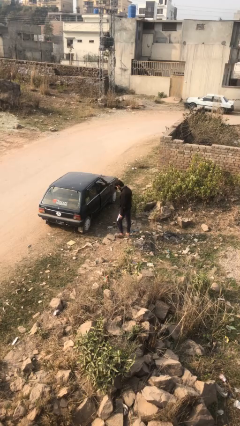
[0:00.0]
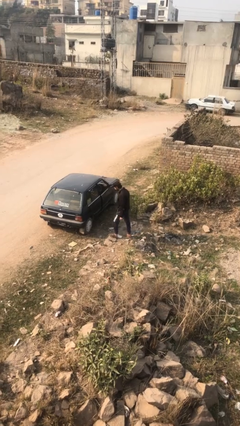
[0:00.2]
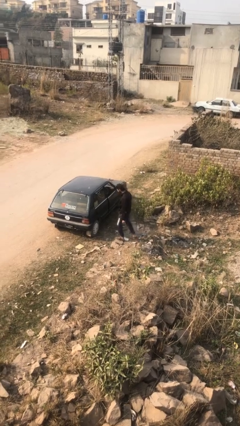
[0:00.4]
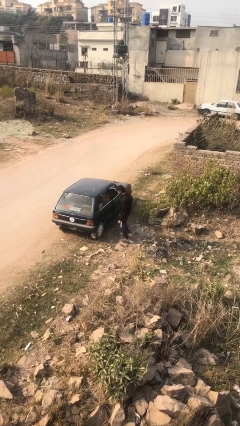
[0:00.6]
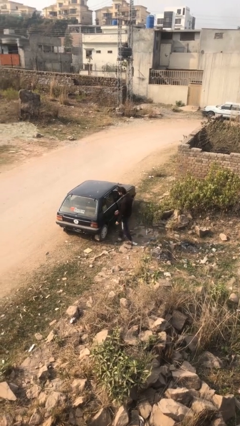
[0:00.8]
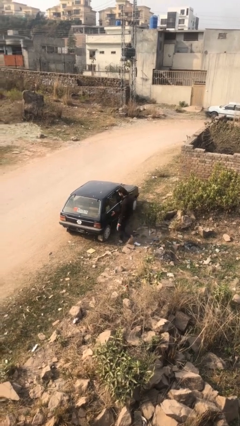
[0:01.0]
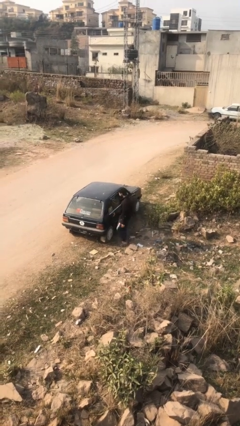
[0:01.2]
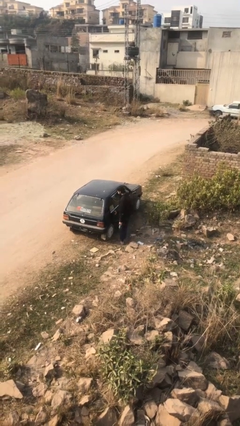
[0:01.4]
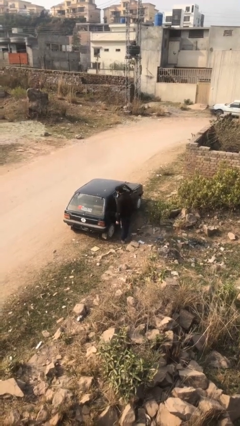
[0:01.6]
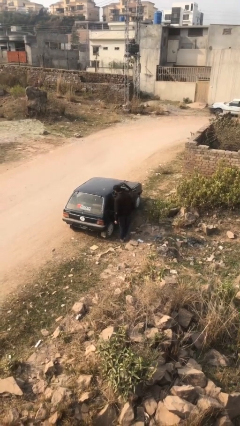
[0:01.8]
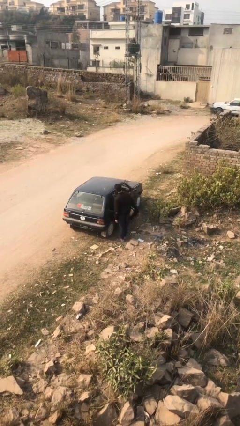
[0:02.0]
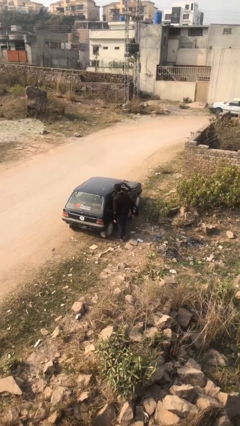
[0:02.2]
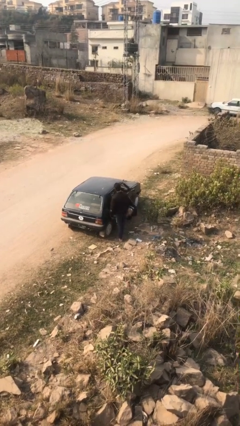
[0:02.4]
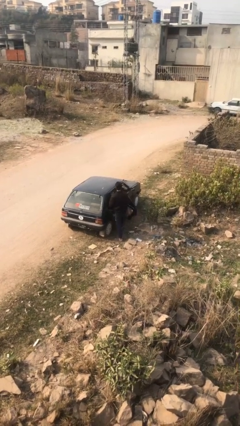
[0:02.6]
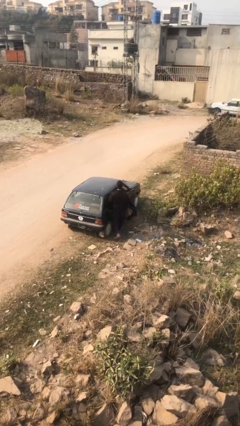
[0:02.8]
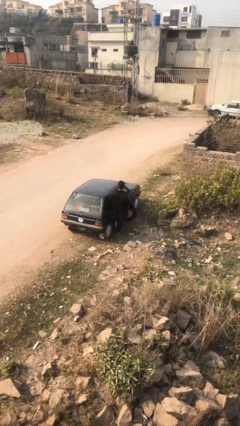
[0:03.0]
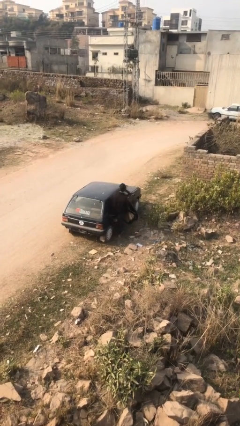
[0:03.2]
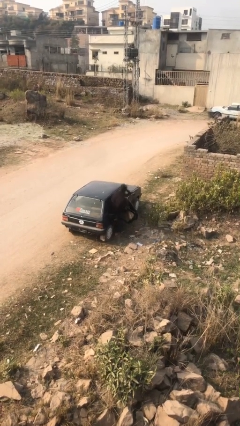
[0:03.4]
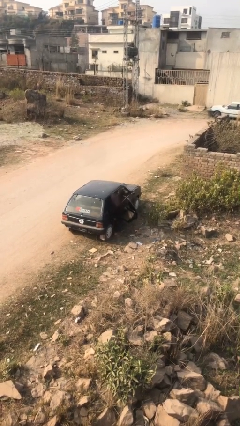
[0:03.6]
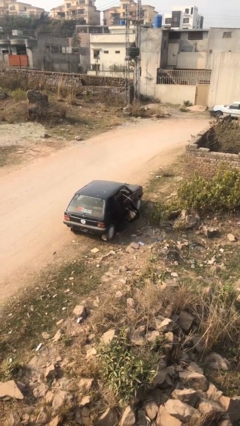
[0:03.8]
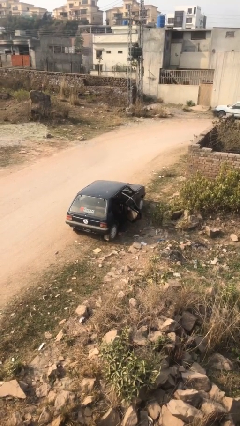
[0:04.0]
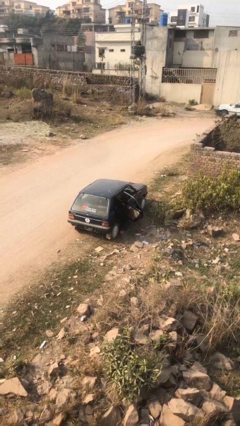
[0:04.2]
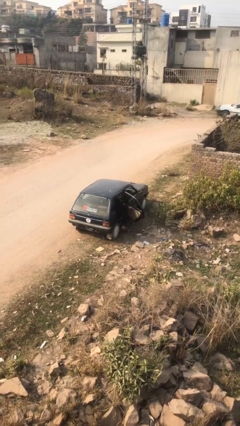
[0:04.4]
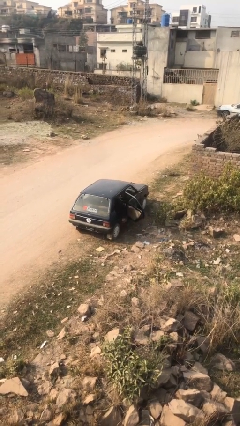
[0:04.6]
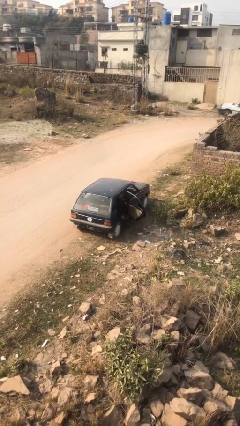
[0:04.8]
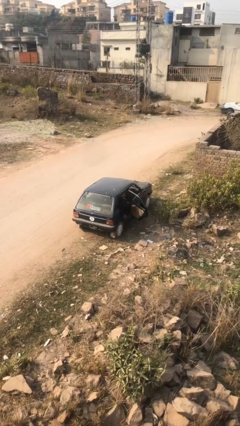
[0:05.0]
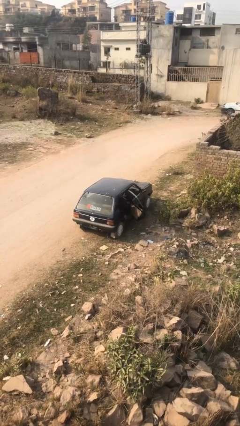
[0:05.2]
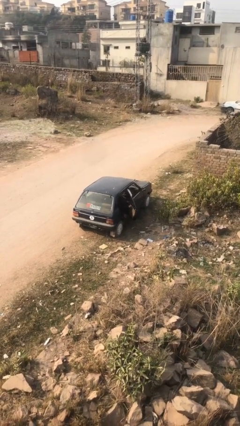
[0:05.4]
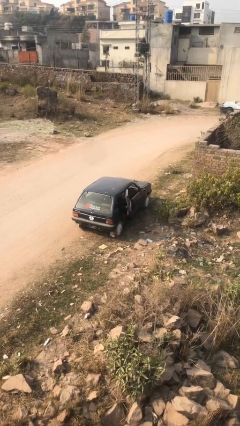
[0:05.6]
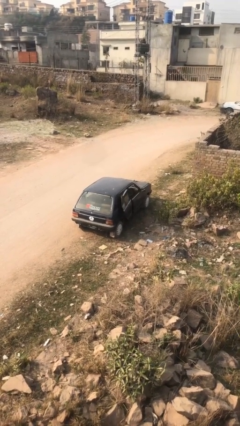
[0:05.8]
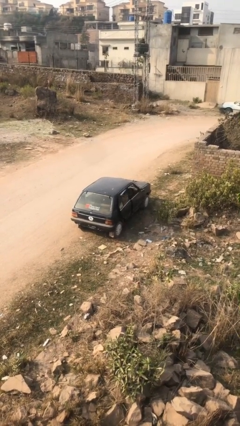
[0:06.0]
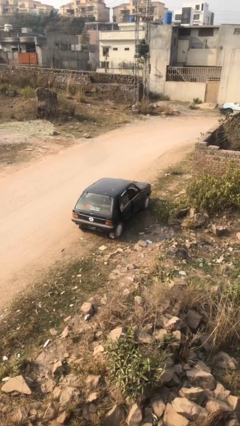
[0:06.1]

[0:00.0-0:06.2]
car picks up person

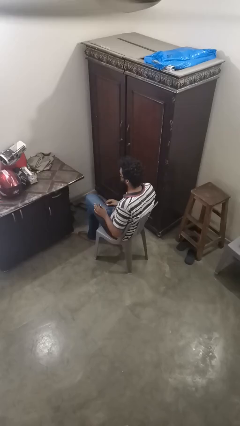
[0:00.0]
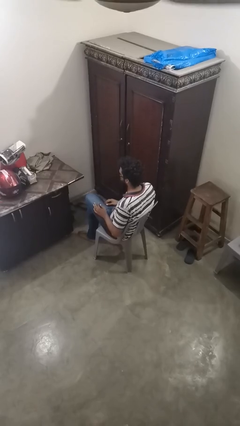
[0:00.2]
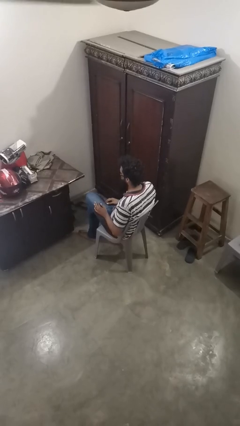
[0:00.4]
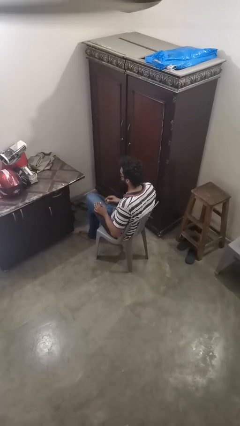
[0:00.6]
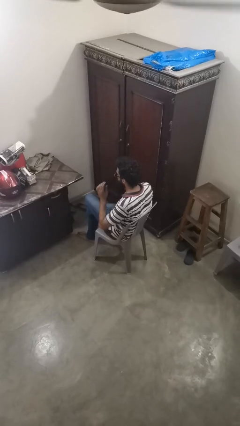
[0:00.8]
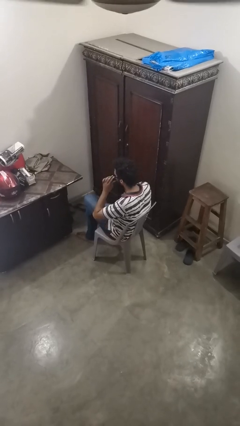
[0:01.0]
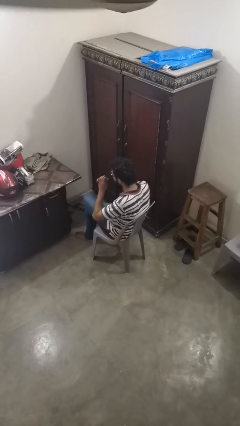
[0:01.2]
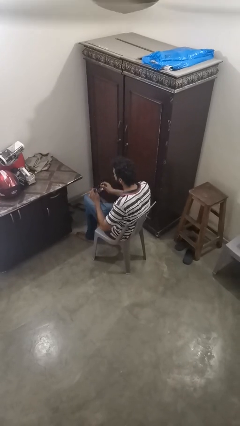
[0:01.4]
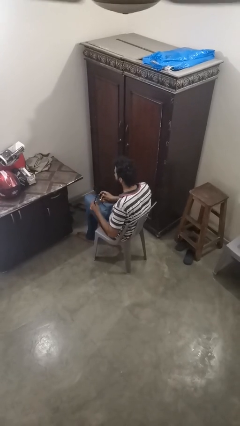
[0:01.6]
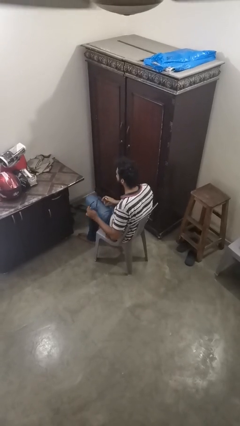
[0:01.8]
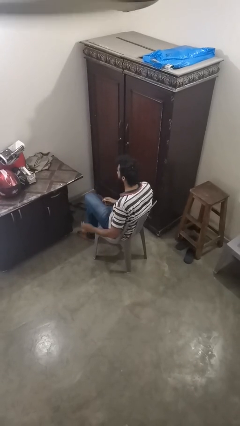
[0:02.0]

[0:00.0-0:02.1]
person takes off sunglasses

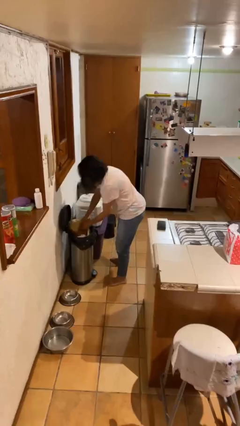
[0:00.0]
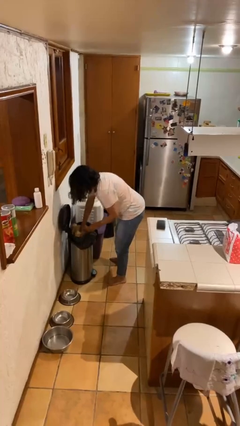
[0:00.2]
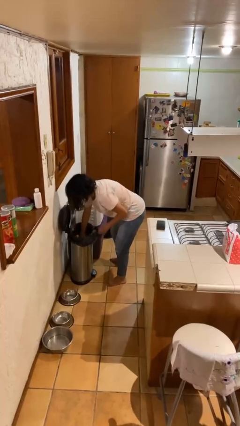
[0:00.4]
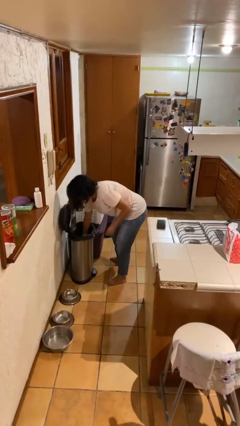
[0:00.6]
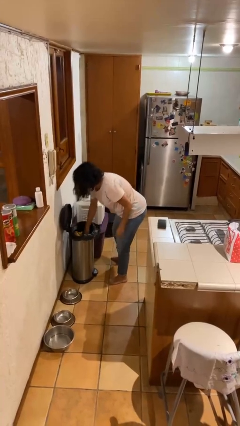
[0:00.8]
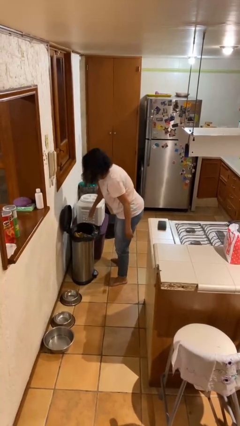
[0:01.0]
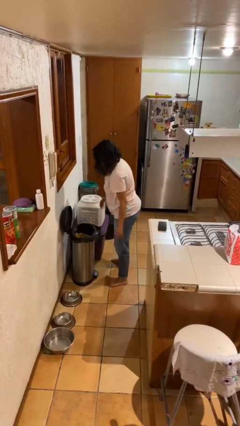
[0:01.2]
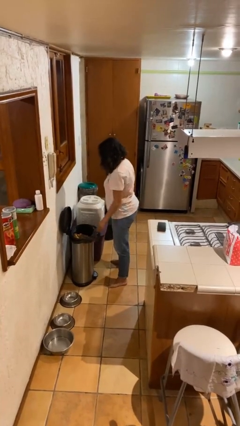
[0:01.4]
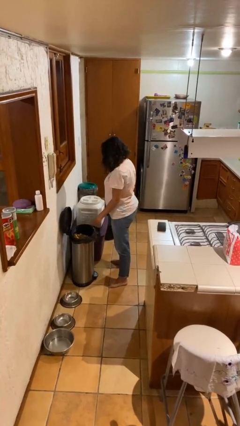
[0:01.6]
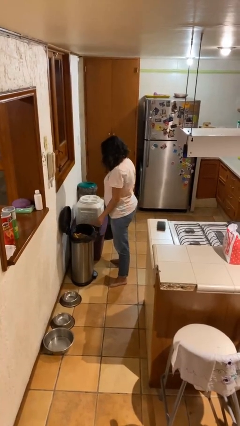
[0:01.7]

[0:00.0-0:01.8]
person discards trash

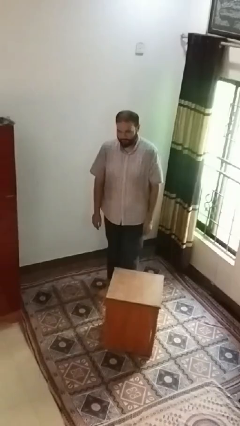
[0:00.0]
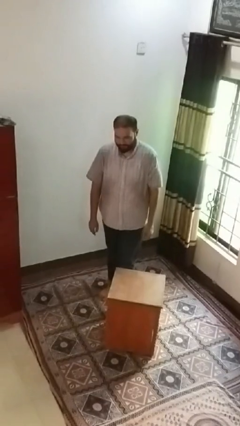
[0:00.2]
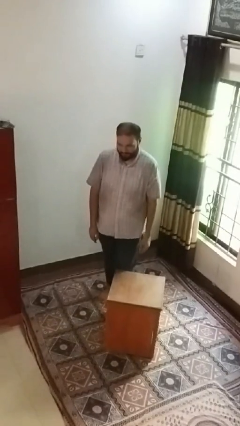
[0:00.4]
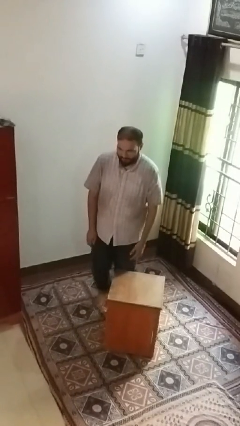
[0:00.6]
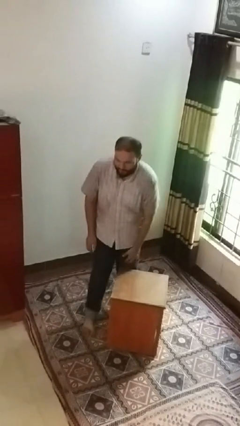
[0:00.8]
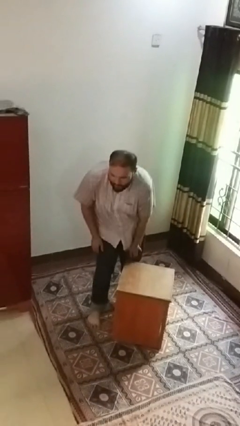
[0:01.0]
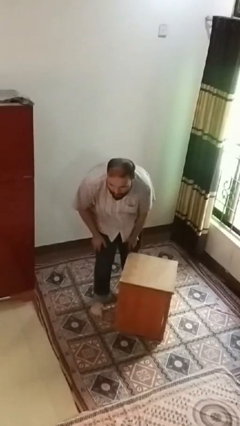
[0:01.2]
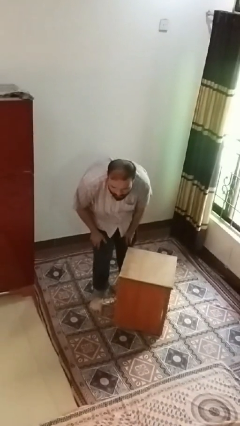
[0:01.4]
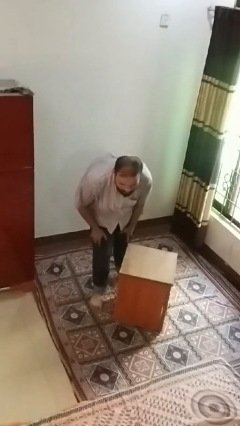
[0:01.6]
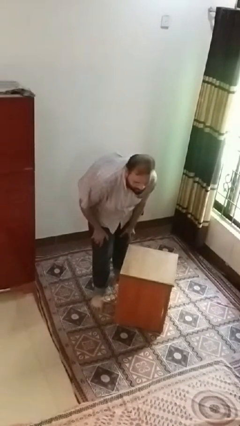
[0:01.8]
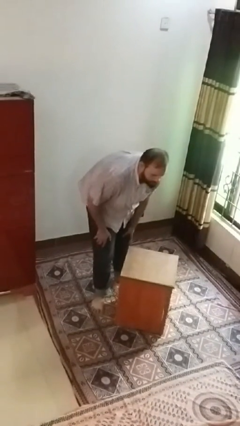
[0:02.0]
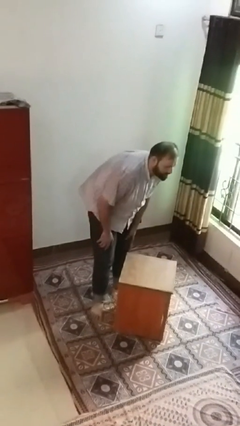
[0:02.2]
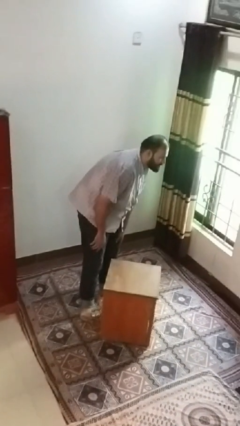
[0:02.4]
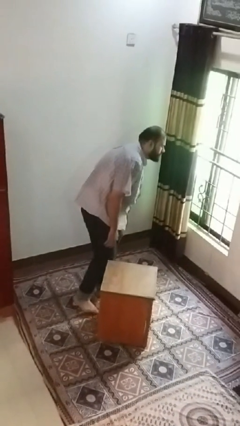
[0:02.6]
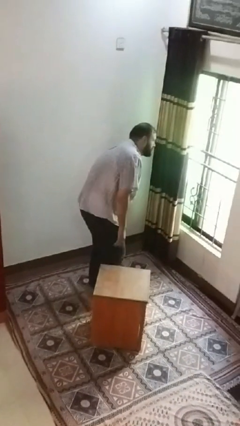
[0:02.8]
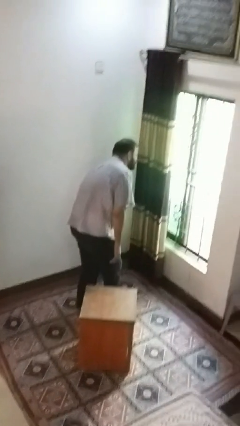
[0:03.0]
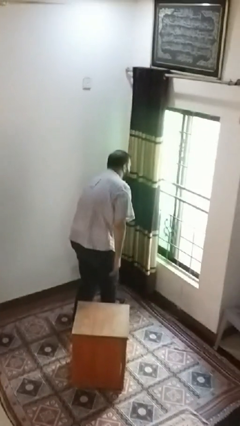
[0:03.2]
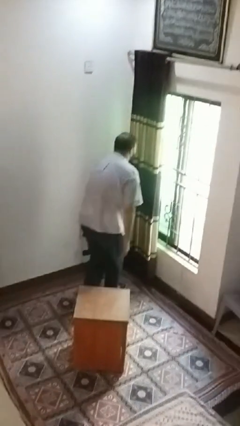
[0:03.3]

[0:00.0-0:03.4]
person bumps into table

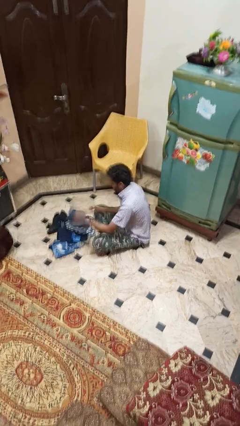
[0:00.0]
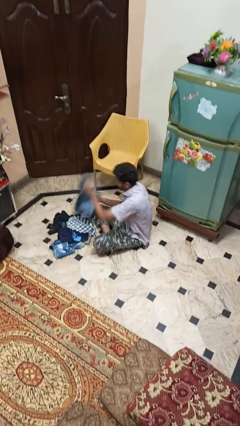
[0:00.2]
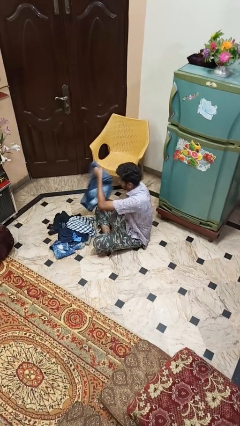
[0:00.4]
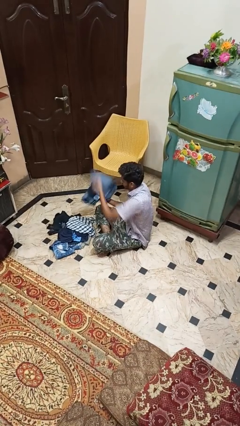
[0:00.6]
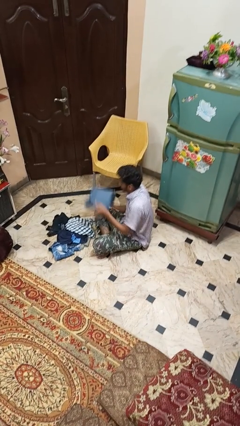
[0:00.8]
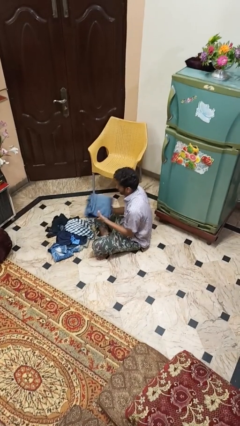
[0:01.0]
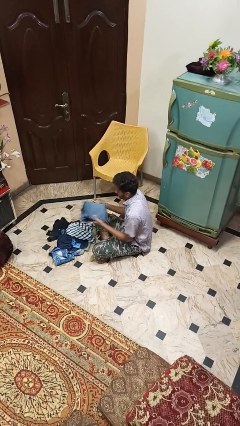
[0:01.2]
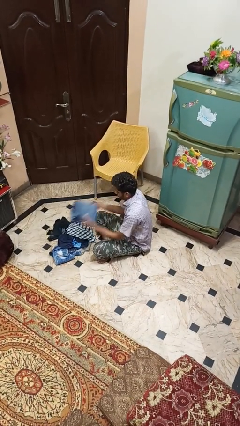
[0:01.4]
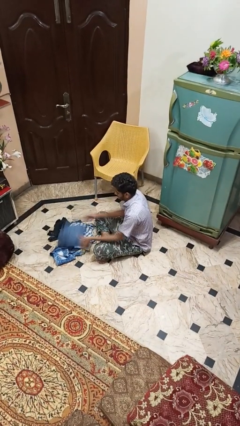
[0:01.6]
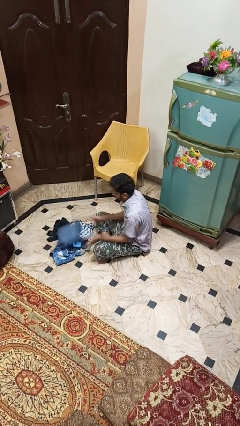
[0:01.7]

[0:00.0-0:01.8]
person folds pants

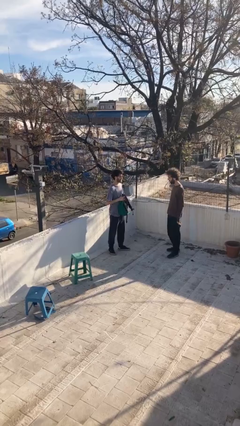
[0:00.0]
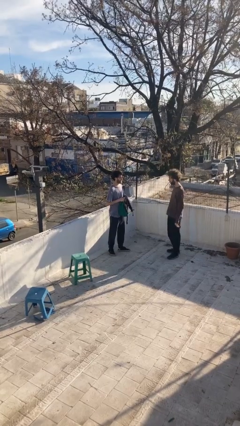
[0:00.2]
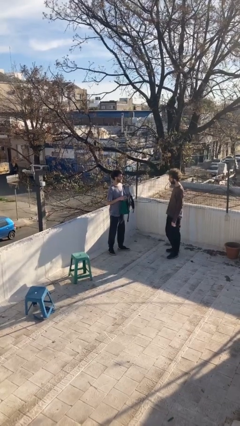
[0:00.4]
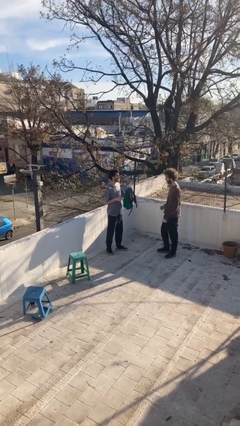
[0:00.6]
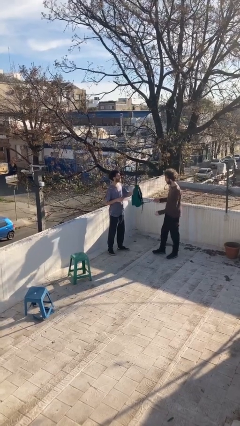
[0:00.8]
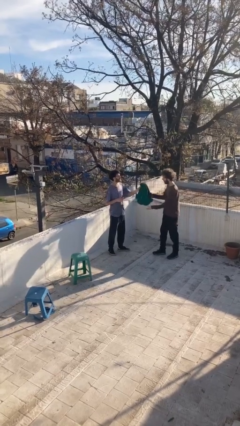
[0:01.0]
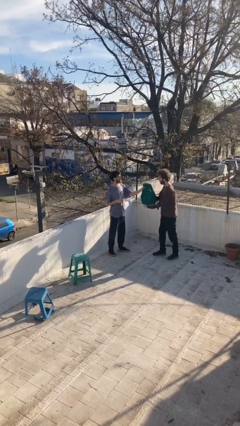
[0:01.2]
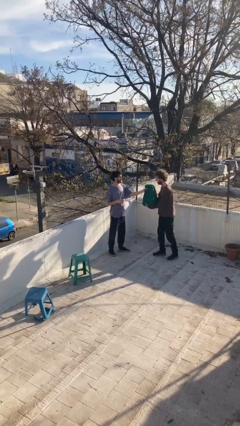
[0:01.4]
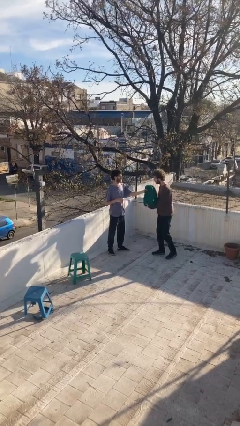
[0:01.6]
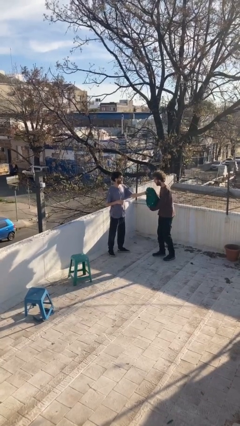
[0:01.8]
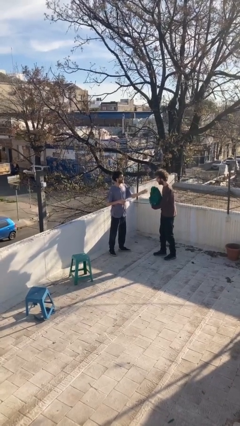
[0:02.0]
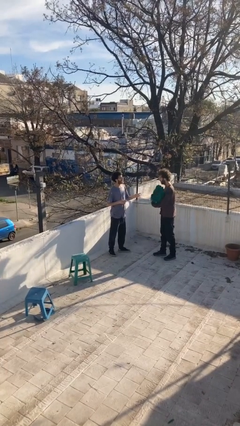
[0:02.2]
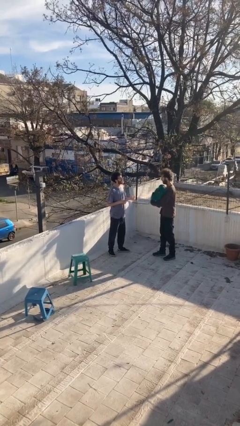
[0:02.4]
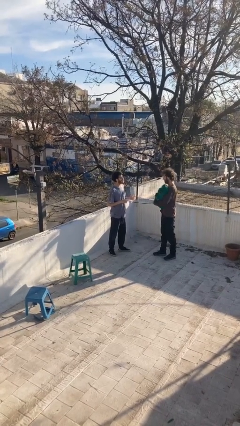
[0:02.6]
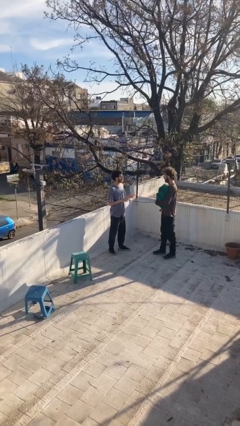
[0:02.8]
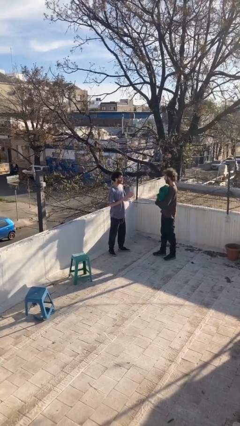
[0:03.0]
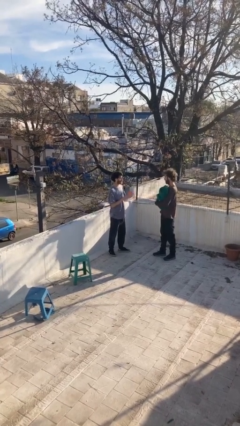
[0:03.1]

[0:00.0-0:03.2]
person transfers object to person
